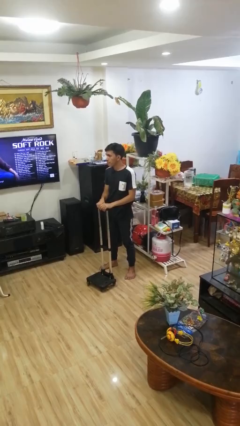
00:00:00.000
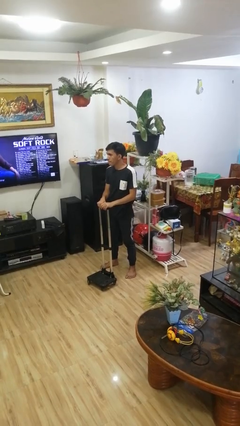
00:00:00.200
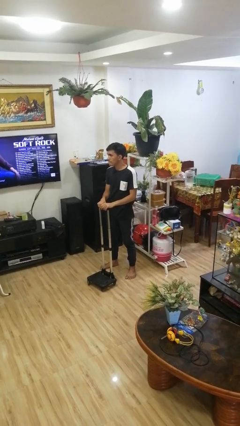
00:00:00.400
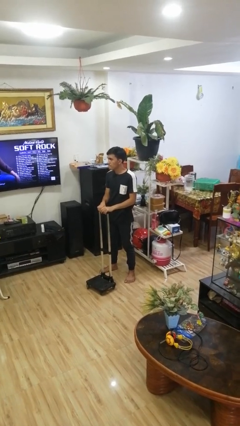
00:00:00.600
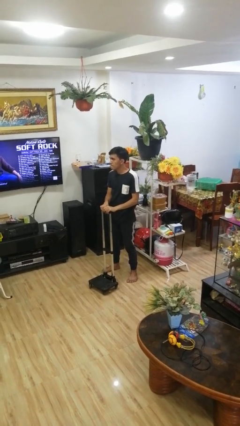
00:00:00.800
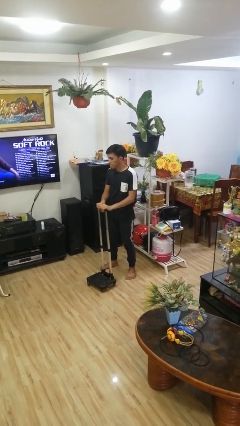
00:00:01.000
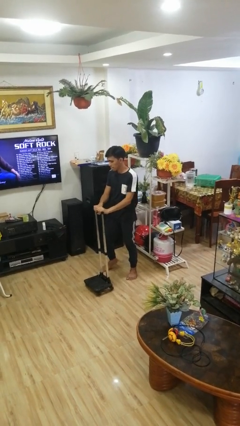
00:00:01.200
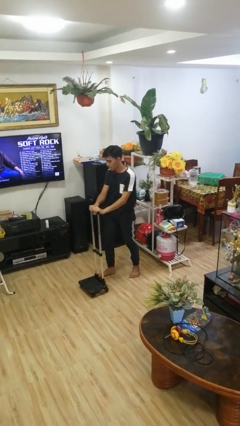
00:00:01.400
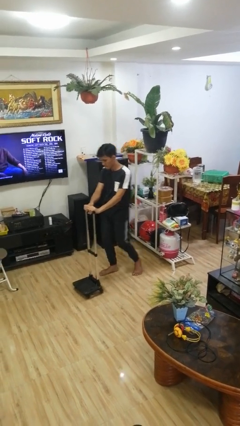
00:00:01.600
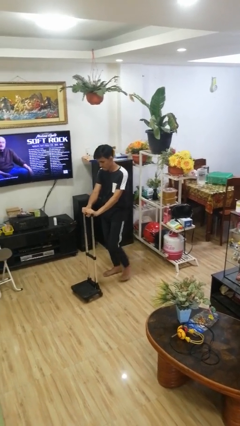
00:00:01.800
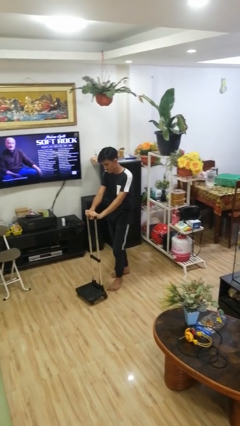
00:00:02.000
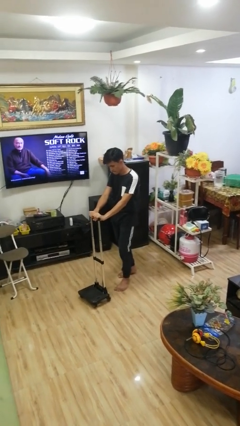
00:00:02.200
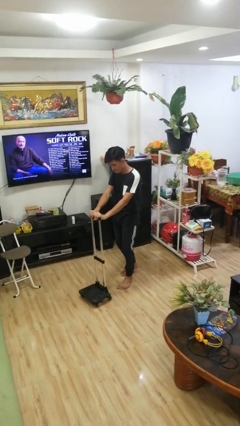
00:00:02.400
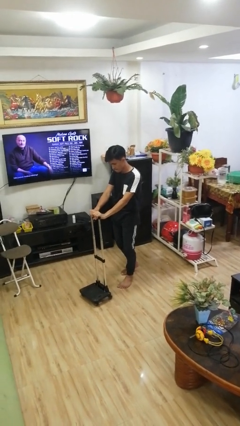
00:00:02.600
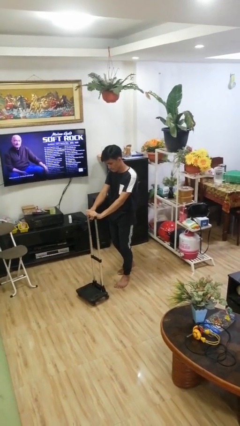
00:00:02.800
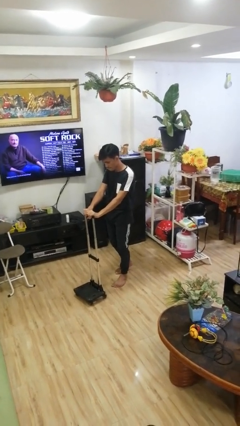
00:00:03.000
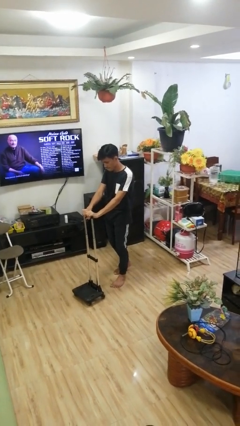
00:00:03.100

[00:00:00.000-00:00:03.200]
person pushes wheeled cart

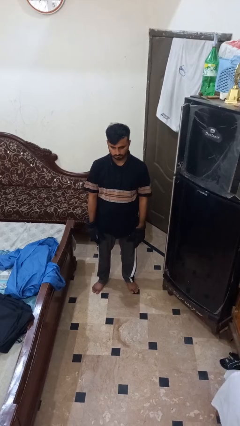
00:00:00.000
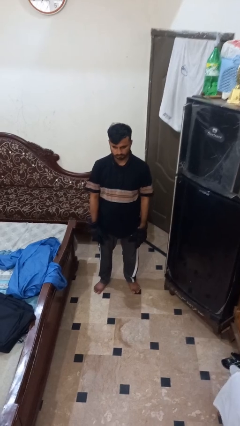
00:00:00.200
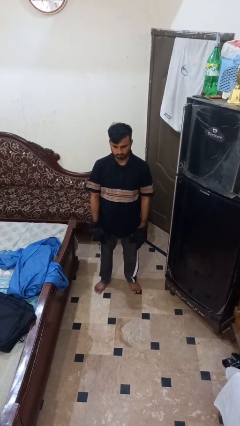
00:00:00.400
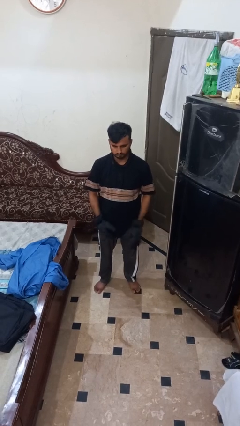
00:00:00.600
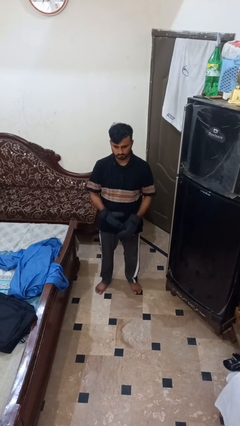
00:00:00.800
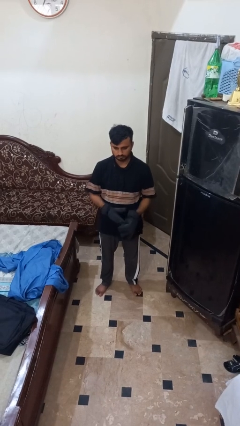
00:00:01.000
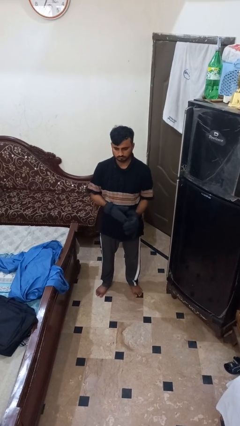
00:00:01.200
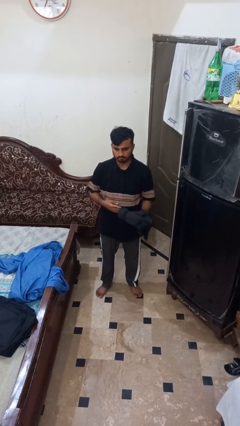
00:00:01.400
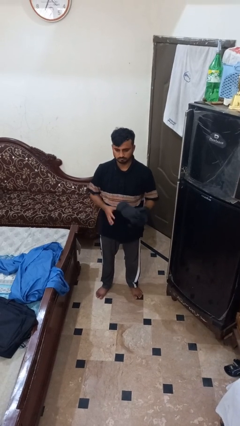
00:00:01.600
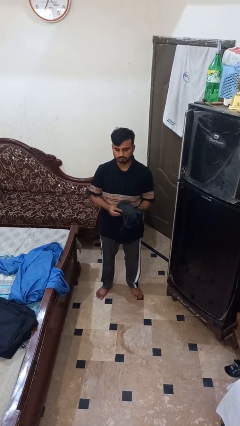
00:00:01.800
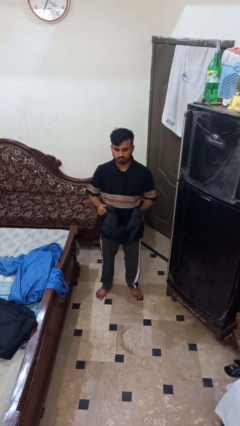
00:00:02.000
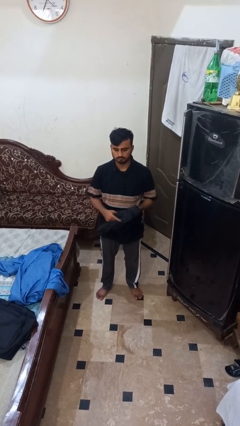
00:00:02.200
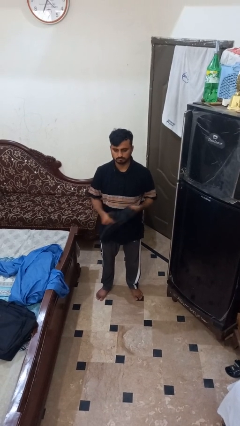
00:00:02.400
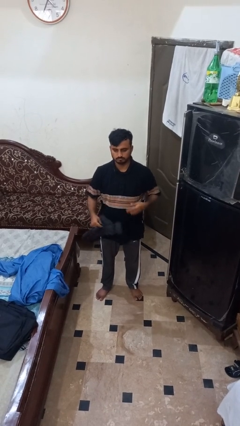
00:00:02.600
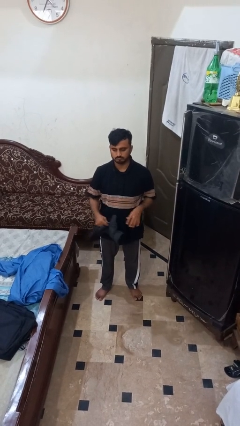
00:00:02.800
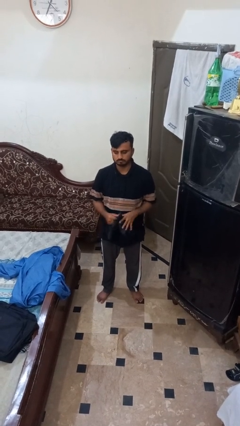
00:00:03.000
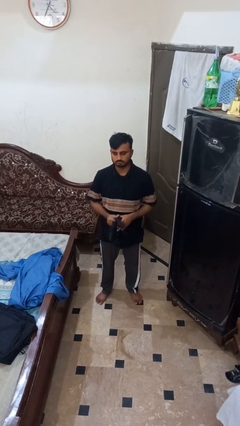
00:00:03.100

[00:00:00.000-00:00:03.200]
person takes off gloves

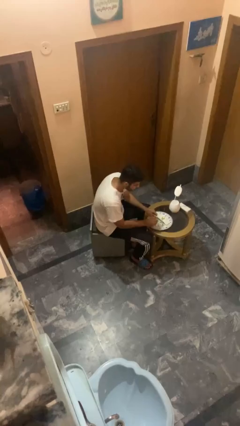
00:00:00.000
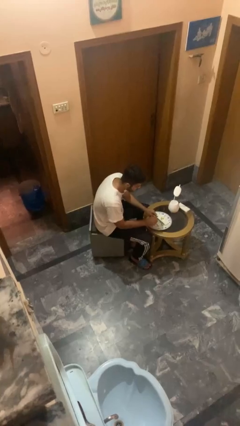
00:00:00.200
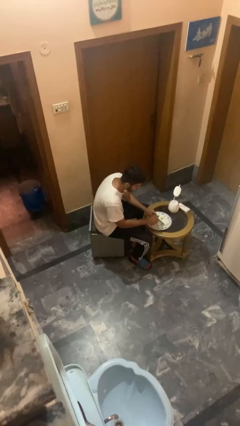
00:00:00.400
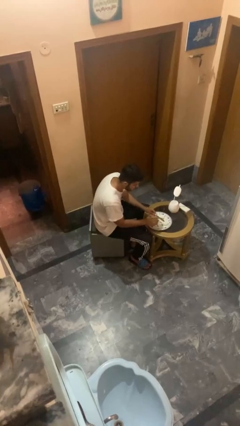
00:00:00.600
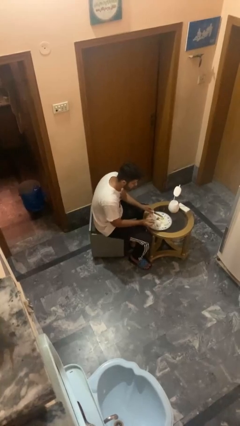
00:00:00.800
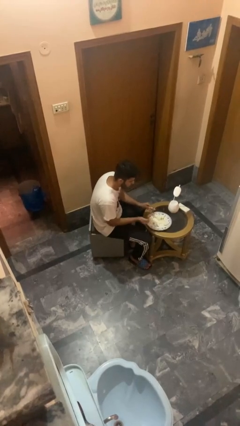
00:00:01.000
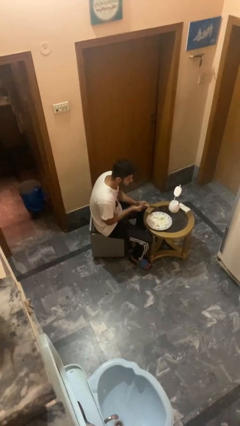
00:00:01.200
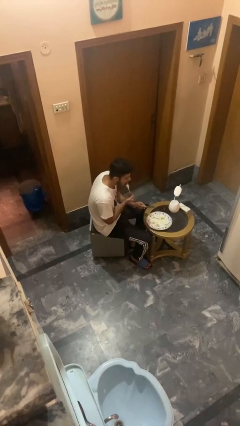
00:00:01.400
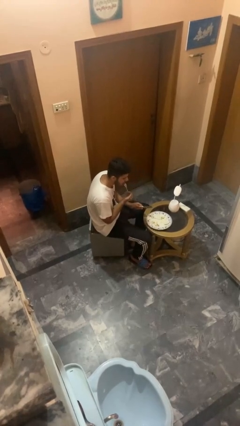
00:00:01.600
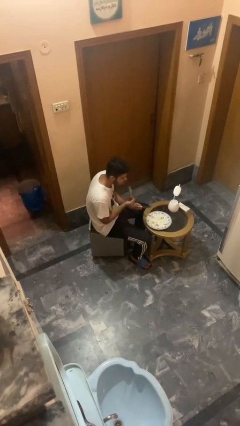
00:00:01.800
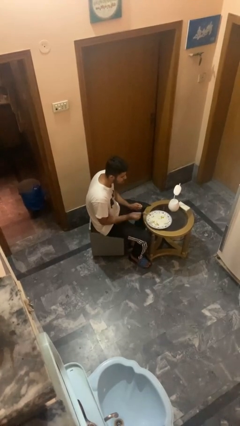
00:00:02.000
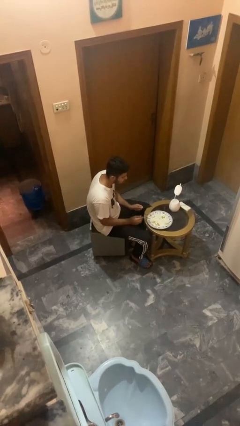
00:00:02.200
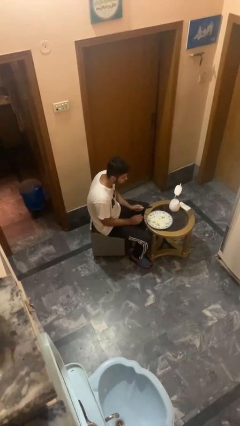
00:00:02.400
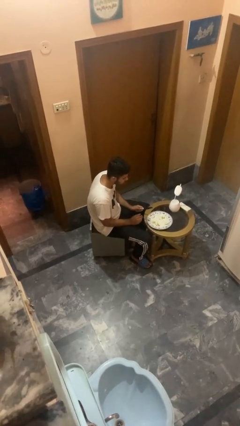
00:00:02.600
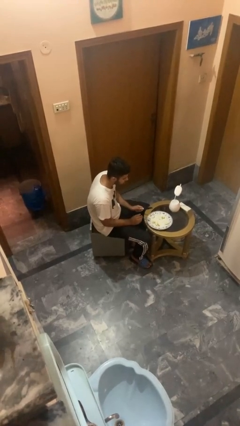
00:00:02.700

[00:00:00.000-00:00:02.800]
person eats with utensil

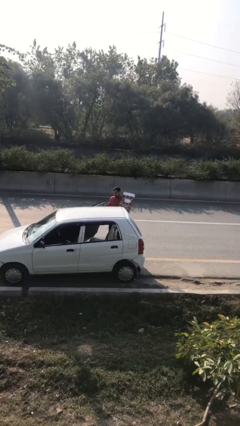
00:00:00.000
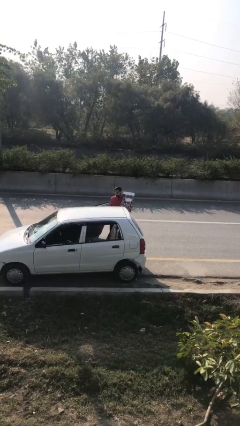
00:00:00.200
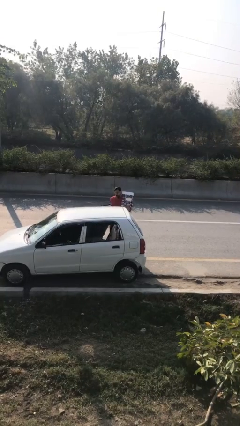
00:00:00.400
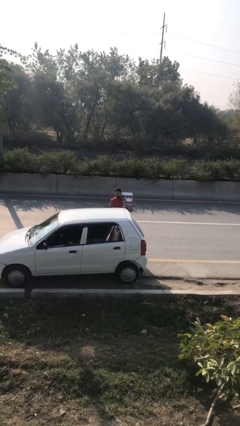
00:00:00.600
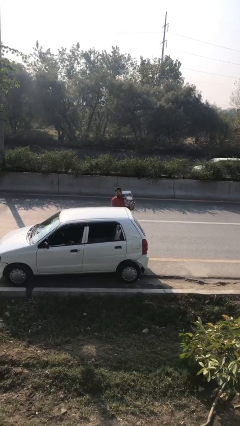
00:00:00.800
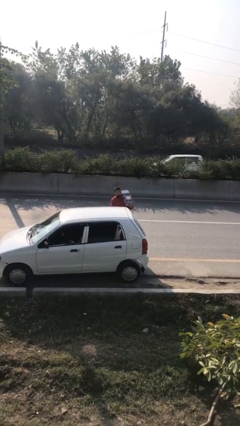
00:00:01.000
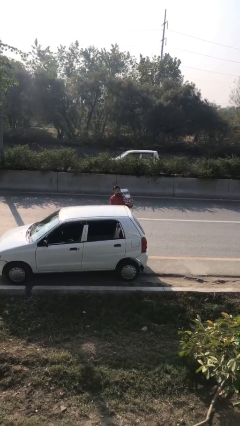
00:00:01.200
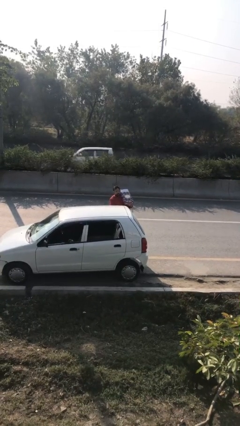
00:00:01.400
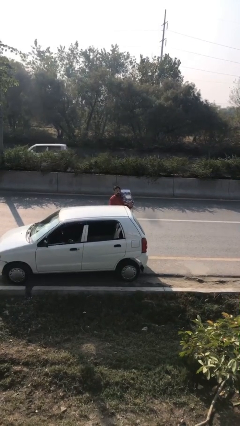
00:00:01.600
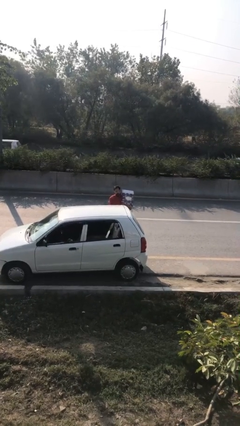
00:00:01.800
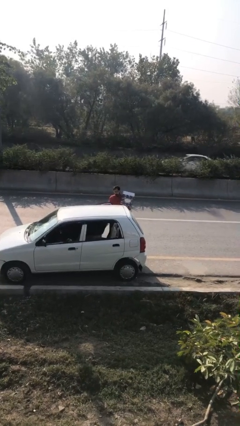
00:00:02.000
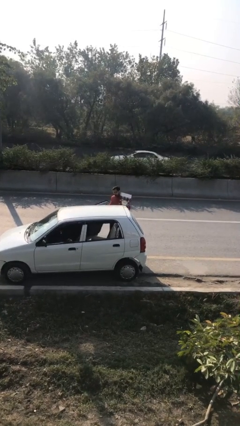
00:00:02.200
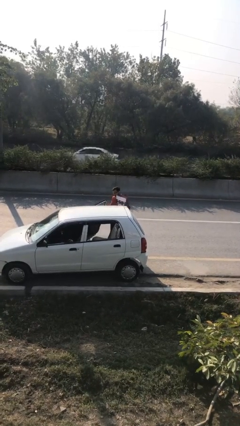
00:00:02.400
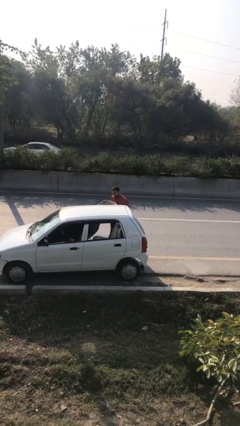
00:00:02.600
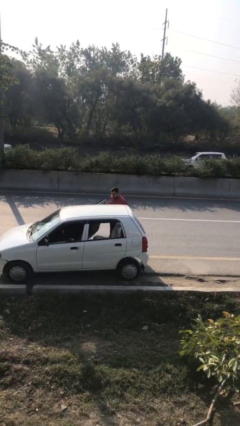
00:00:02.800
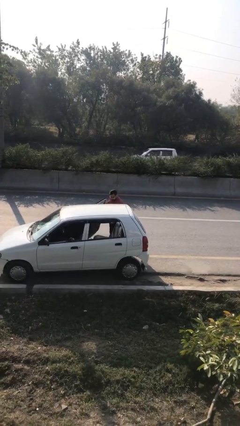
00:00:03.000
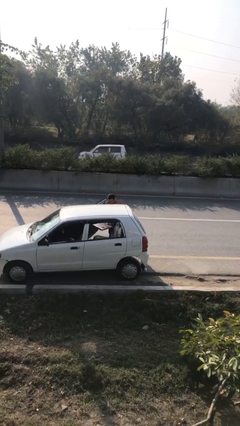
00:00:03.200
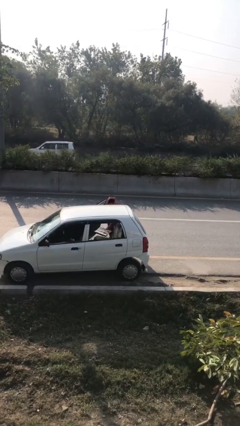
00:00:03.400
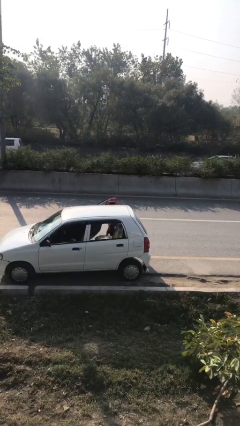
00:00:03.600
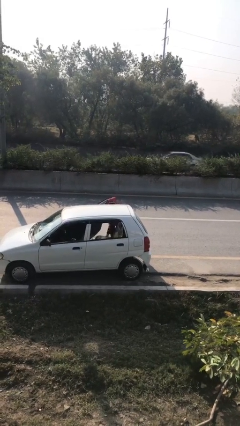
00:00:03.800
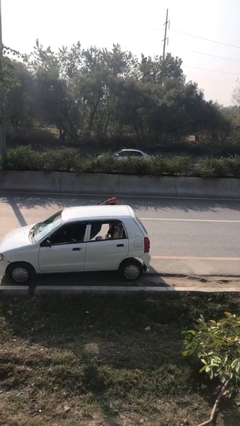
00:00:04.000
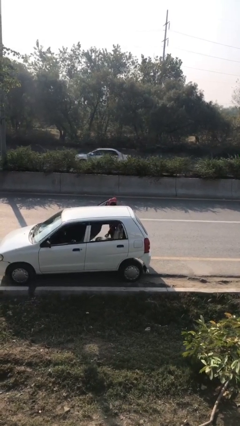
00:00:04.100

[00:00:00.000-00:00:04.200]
person loads car

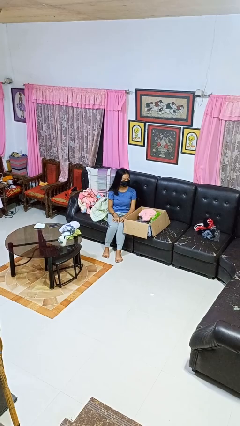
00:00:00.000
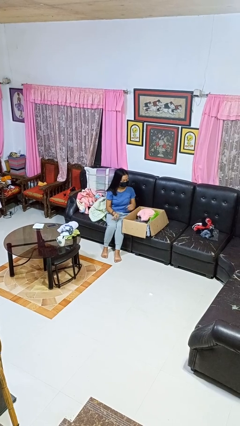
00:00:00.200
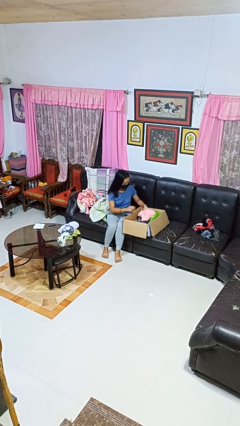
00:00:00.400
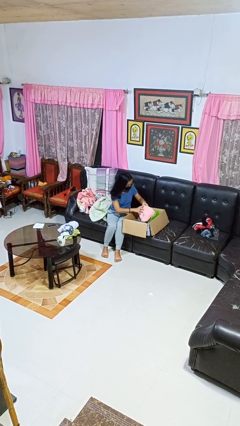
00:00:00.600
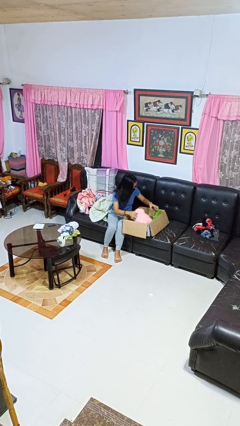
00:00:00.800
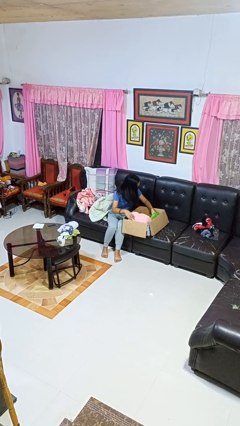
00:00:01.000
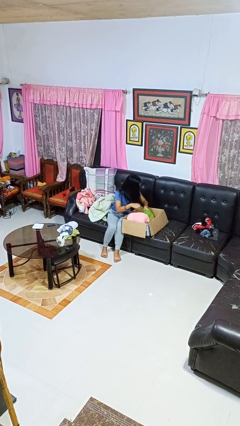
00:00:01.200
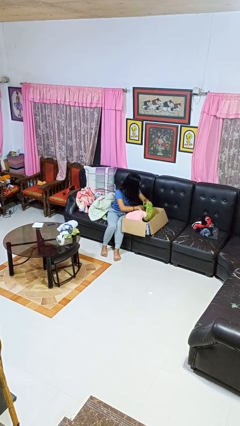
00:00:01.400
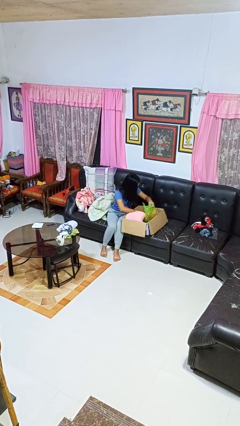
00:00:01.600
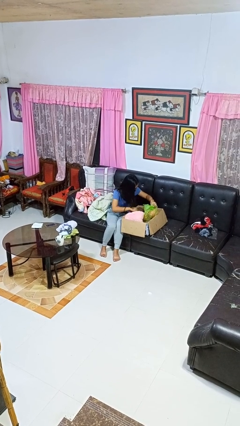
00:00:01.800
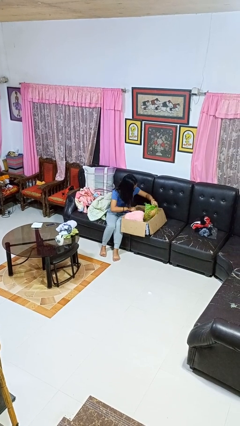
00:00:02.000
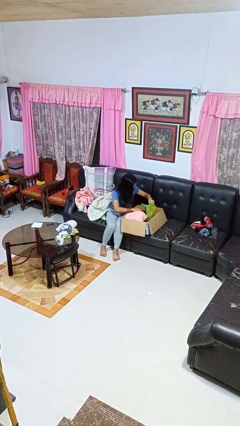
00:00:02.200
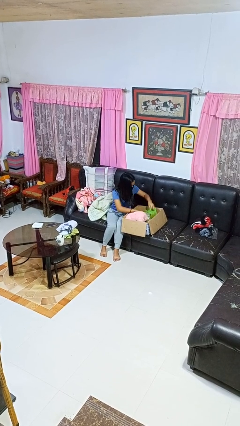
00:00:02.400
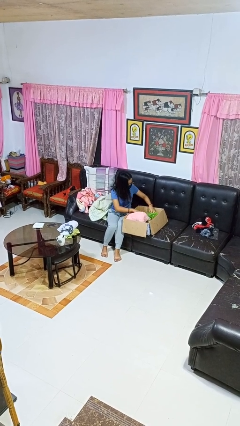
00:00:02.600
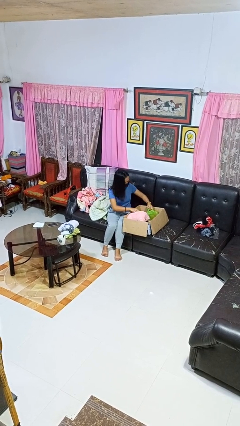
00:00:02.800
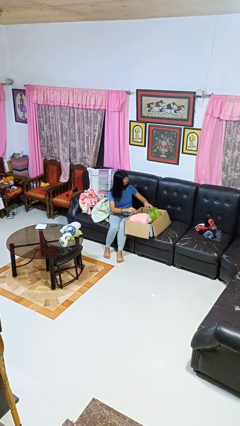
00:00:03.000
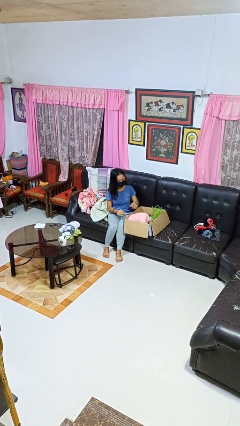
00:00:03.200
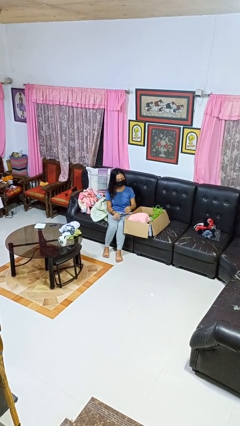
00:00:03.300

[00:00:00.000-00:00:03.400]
person searches in box

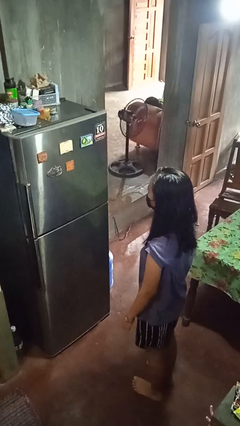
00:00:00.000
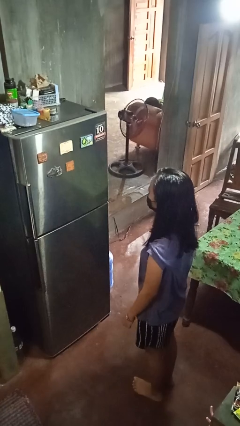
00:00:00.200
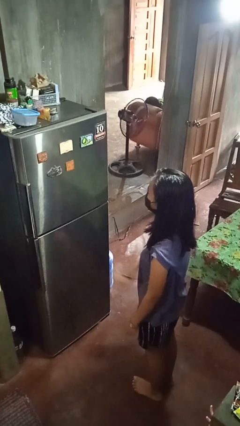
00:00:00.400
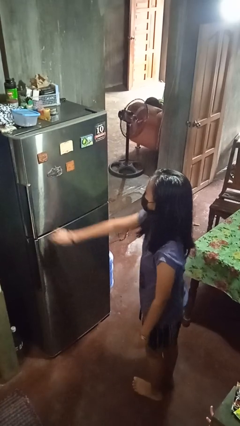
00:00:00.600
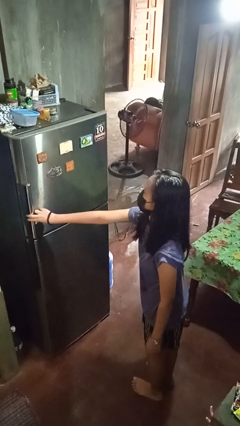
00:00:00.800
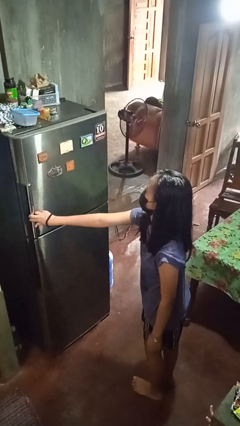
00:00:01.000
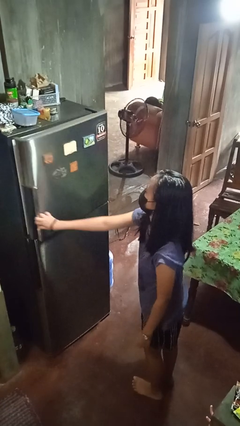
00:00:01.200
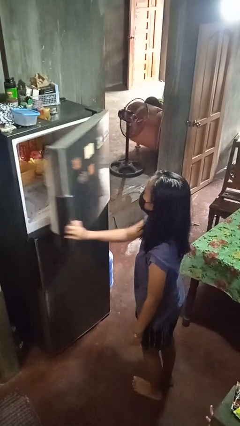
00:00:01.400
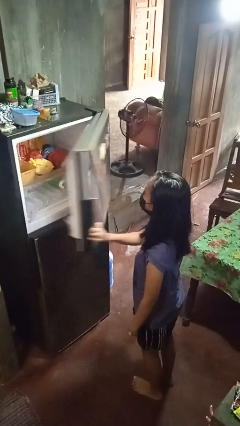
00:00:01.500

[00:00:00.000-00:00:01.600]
person opens refrigerator
